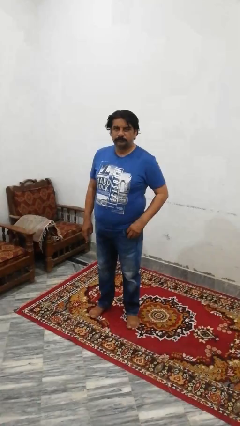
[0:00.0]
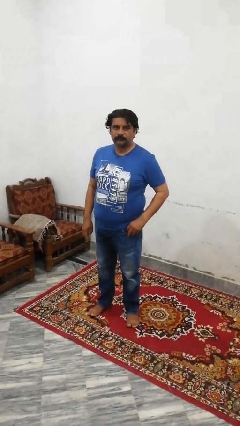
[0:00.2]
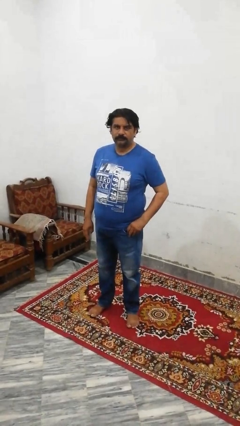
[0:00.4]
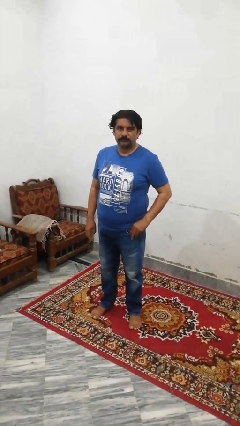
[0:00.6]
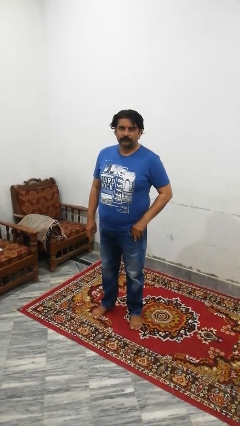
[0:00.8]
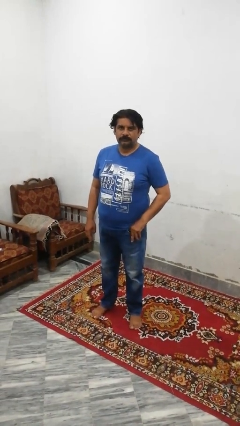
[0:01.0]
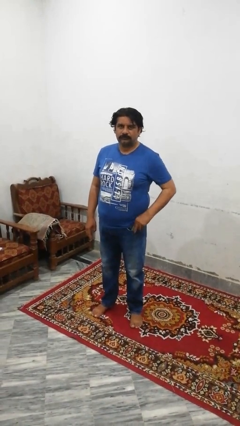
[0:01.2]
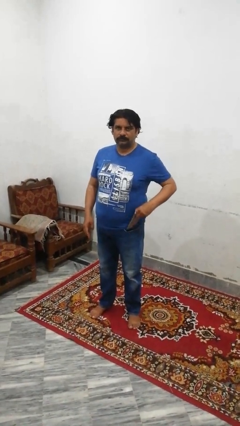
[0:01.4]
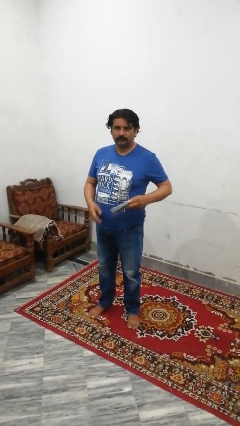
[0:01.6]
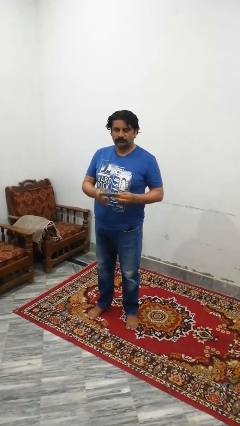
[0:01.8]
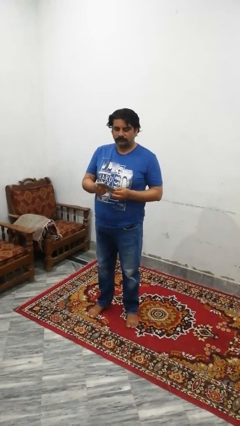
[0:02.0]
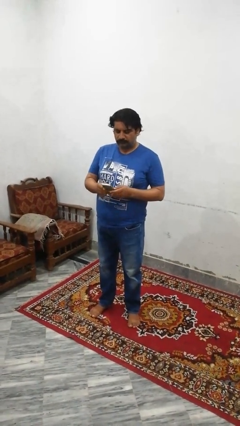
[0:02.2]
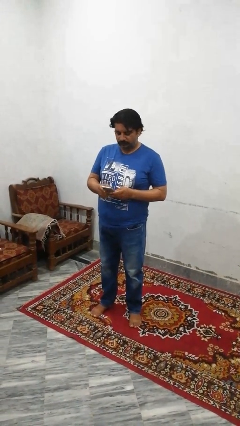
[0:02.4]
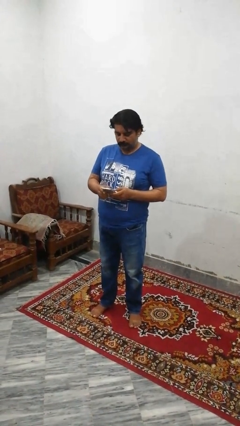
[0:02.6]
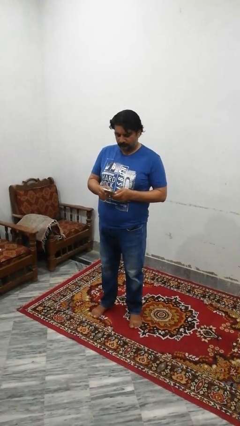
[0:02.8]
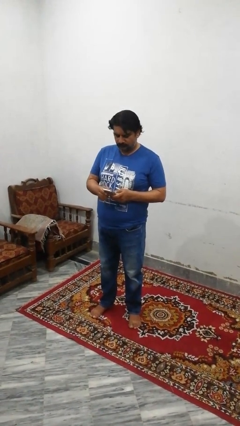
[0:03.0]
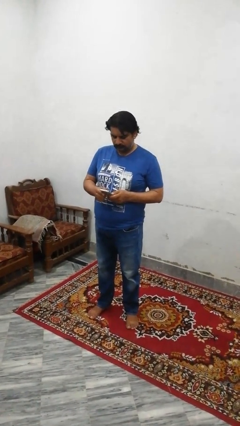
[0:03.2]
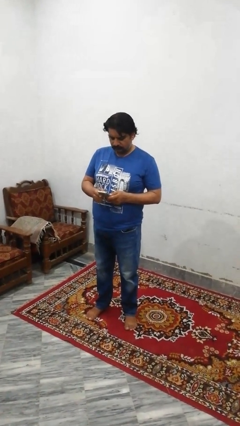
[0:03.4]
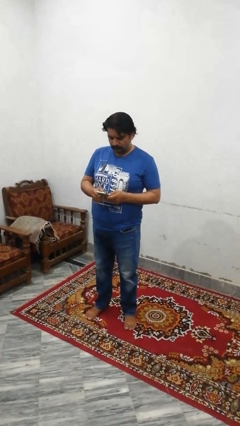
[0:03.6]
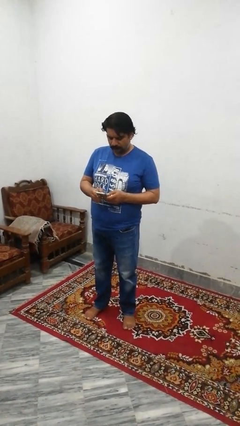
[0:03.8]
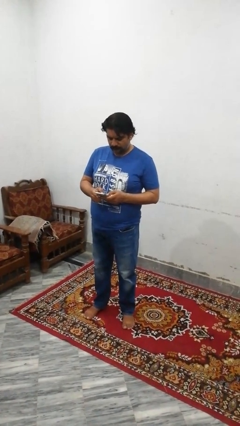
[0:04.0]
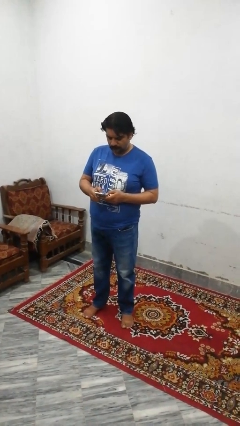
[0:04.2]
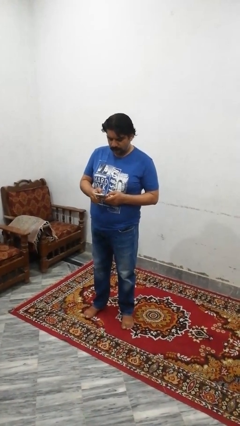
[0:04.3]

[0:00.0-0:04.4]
person takes phone from pocket

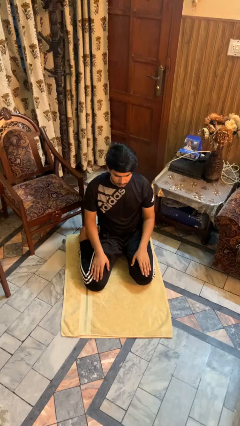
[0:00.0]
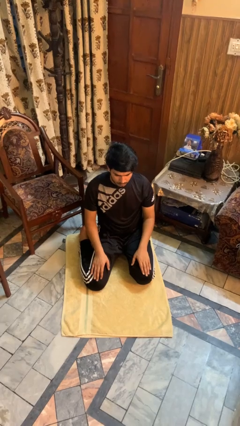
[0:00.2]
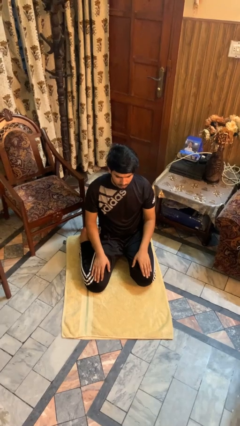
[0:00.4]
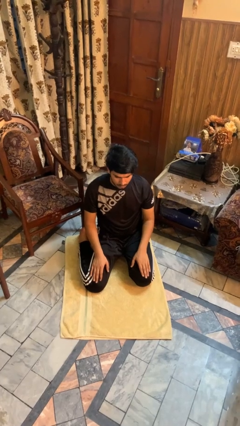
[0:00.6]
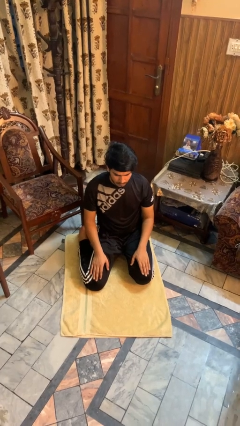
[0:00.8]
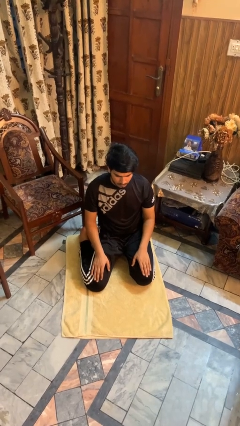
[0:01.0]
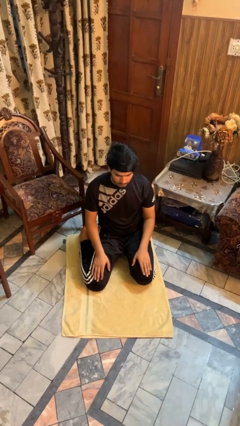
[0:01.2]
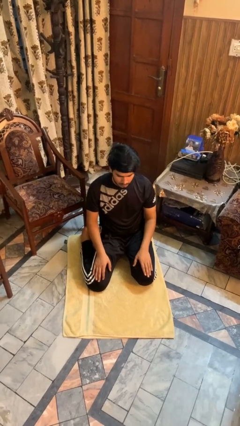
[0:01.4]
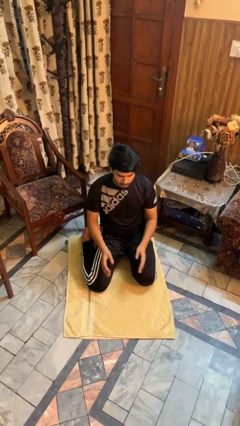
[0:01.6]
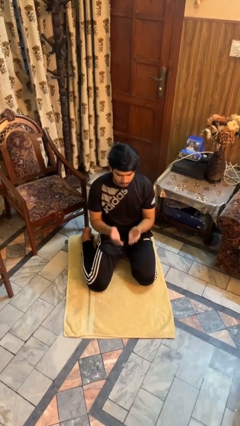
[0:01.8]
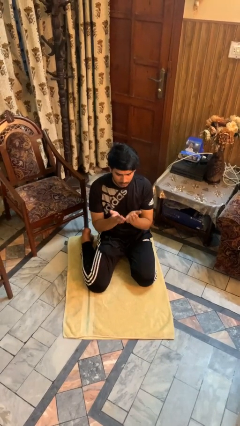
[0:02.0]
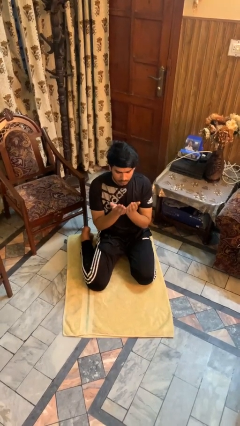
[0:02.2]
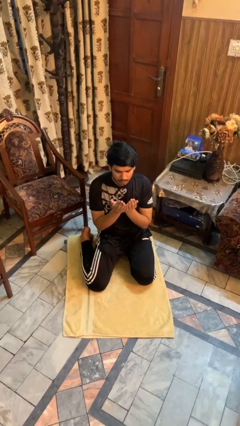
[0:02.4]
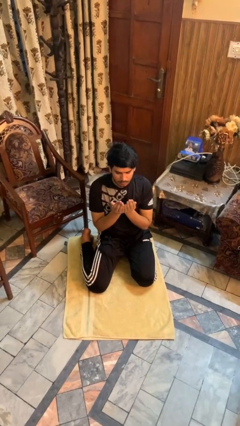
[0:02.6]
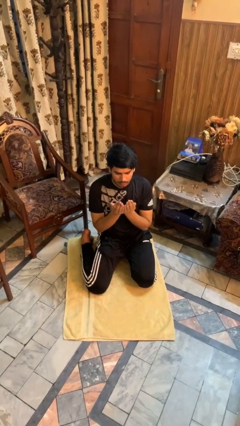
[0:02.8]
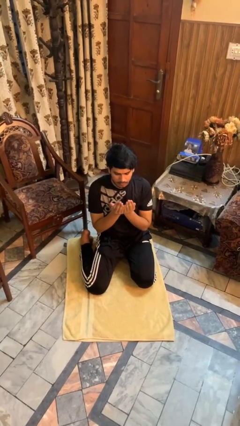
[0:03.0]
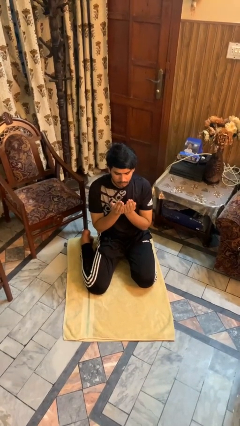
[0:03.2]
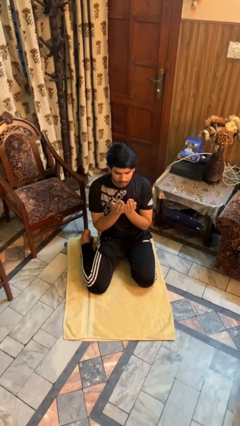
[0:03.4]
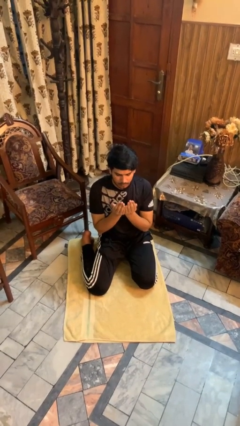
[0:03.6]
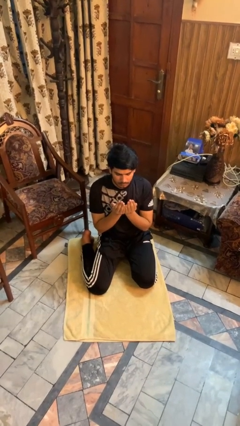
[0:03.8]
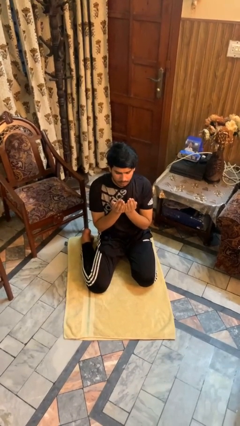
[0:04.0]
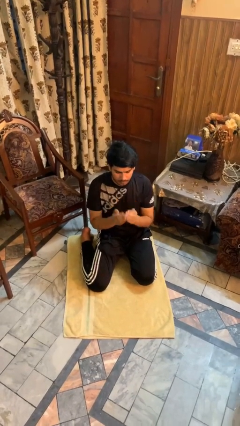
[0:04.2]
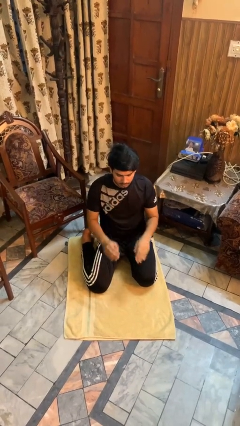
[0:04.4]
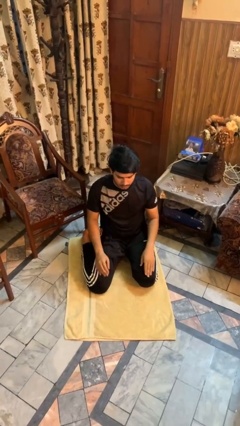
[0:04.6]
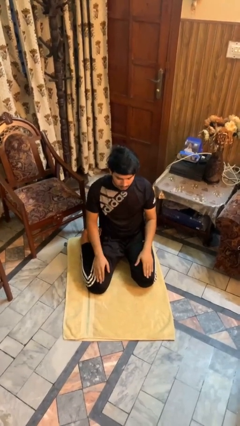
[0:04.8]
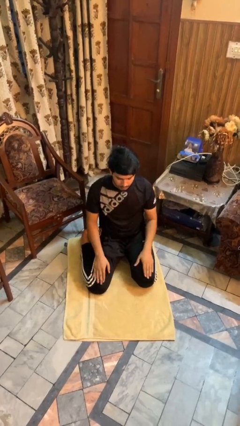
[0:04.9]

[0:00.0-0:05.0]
person prays

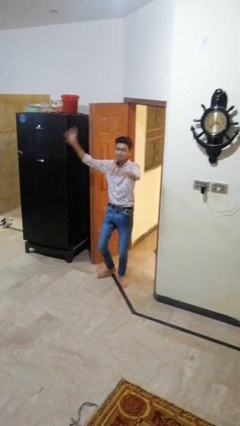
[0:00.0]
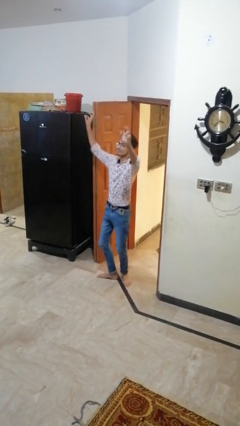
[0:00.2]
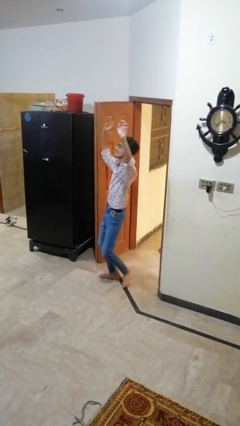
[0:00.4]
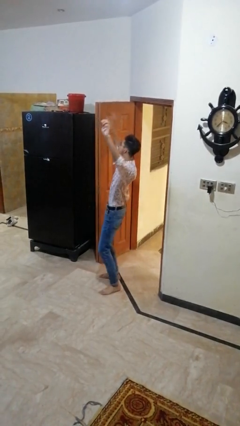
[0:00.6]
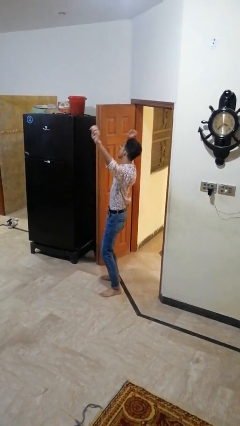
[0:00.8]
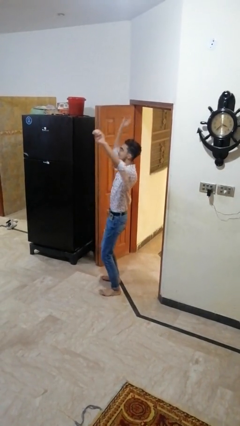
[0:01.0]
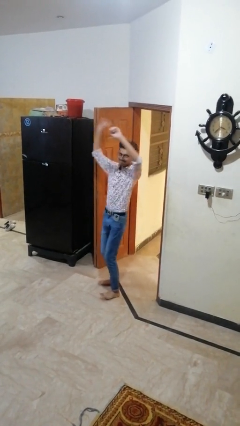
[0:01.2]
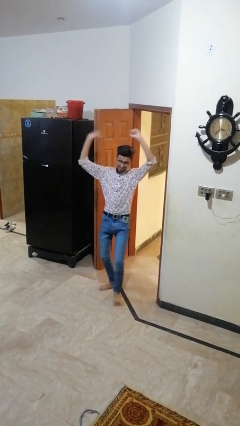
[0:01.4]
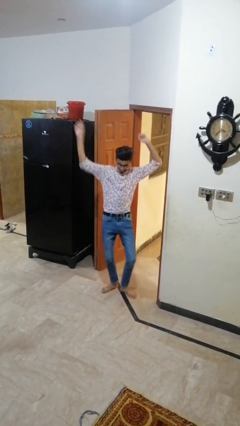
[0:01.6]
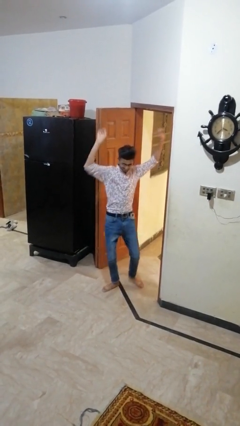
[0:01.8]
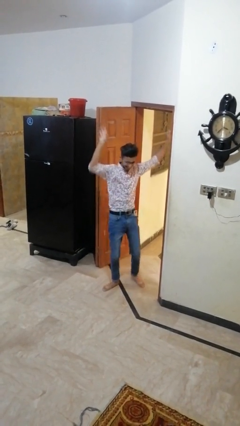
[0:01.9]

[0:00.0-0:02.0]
person dances in place

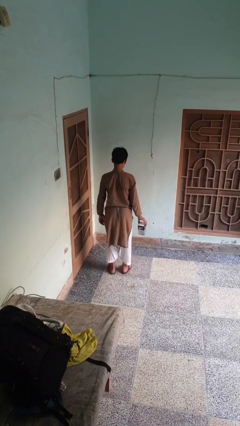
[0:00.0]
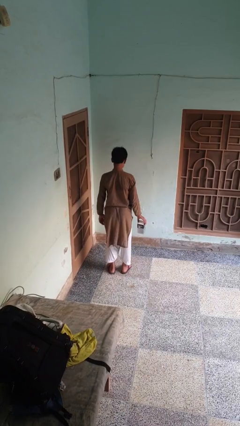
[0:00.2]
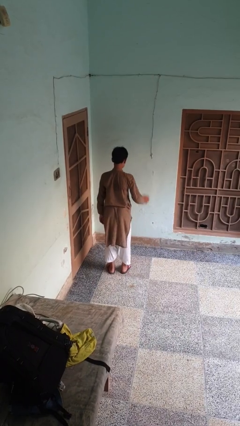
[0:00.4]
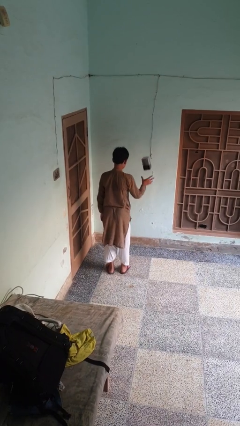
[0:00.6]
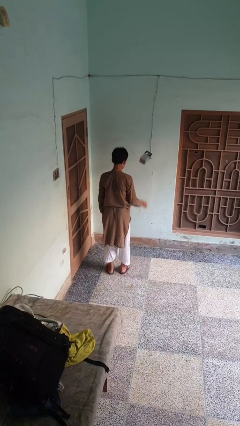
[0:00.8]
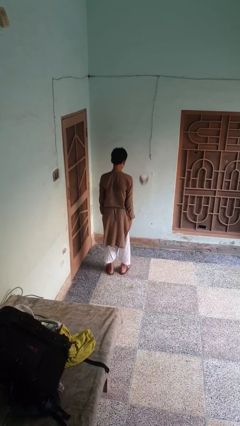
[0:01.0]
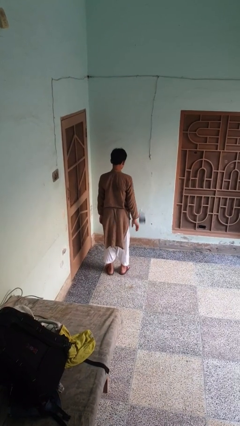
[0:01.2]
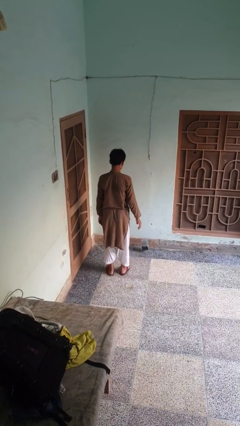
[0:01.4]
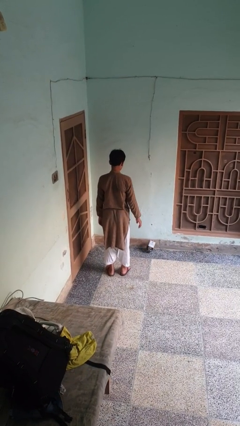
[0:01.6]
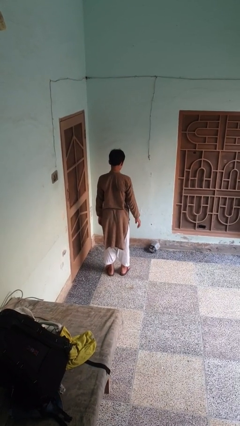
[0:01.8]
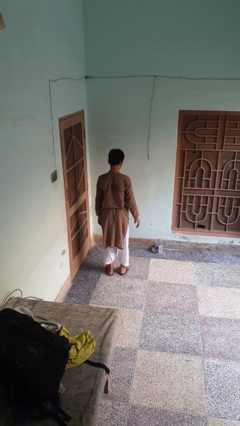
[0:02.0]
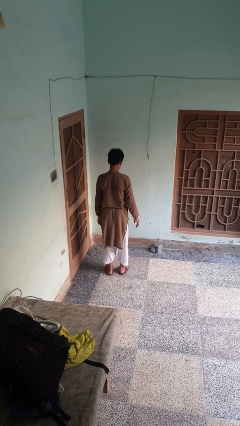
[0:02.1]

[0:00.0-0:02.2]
person throws object into air

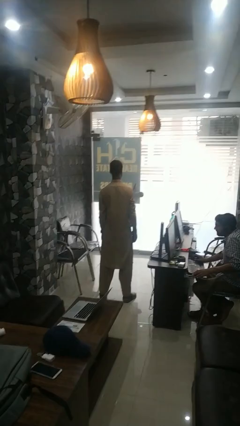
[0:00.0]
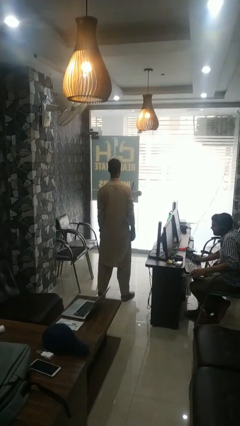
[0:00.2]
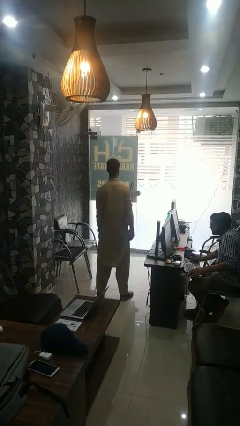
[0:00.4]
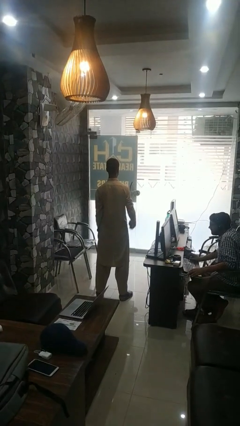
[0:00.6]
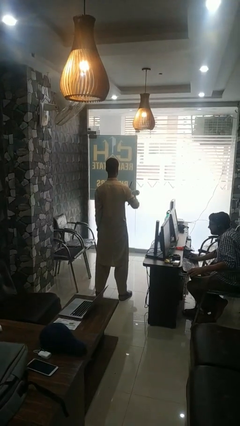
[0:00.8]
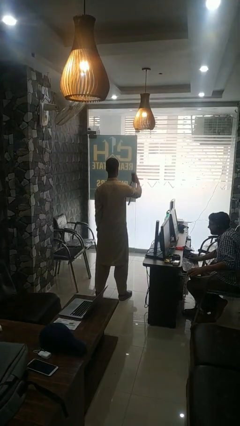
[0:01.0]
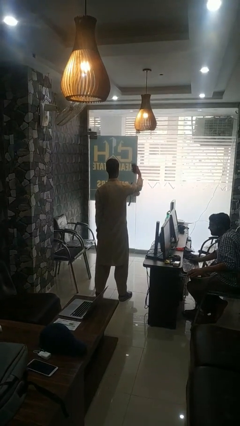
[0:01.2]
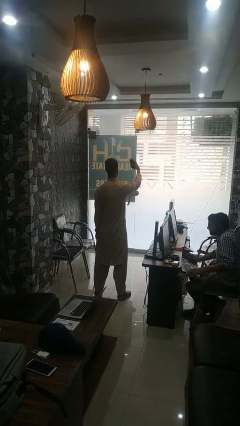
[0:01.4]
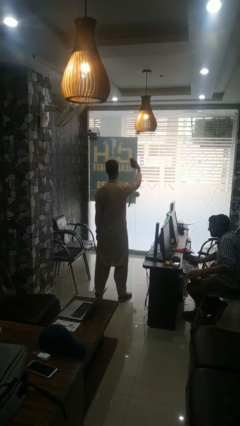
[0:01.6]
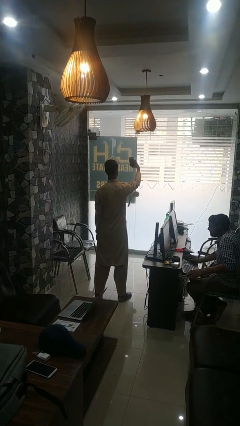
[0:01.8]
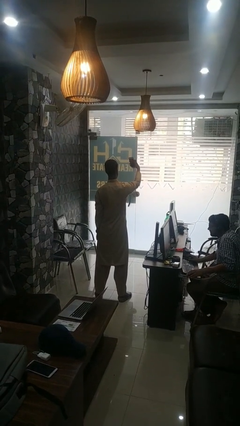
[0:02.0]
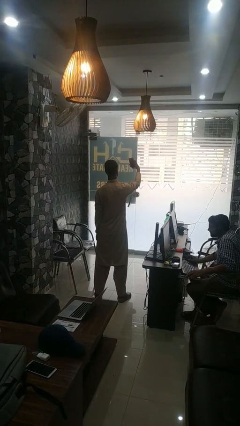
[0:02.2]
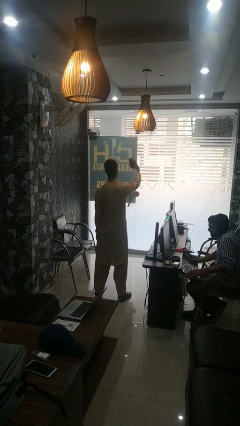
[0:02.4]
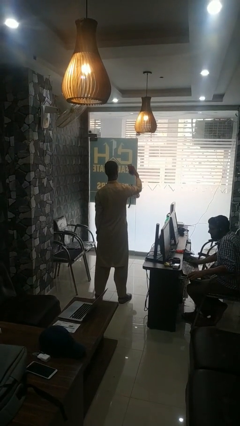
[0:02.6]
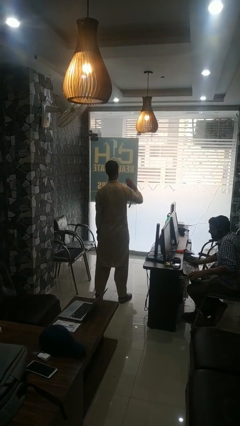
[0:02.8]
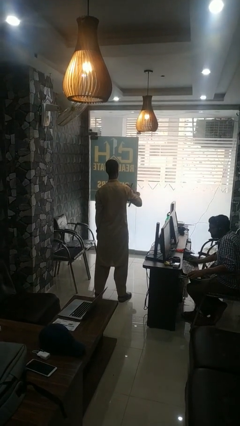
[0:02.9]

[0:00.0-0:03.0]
person takes selfie

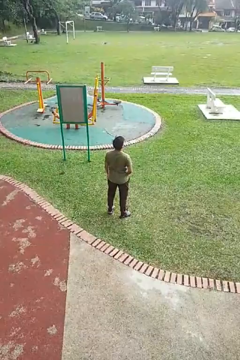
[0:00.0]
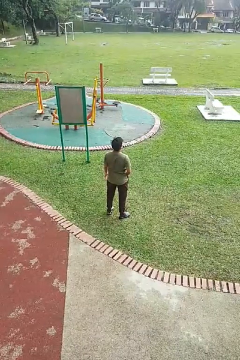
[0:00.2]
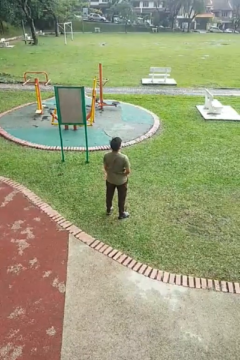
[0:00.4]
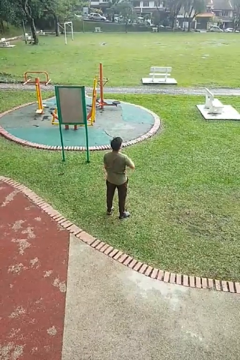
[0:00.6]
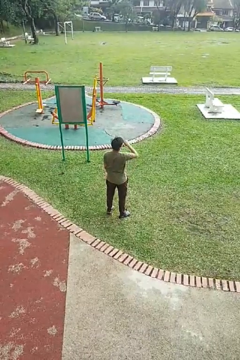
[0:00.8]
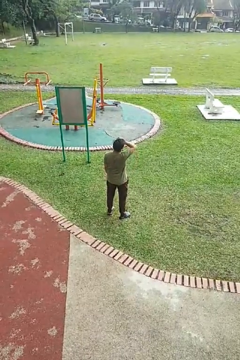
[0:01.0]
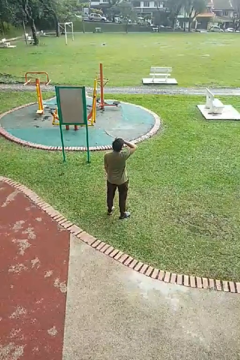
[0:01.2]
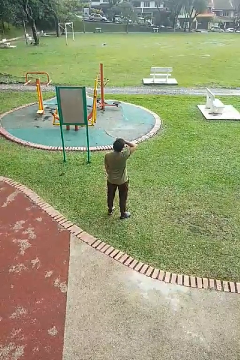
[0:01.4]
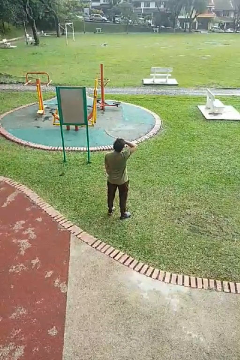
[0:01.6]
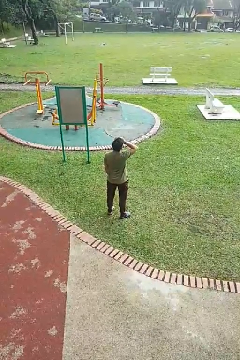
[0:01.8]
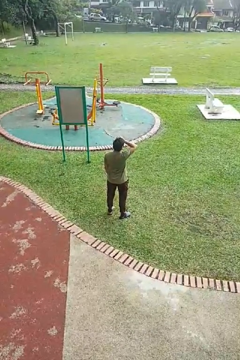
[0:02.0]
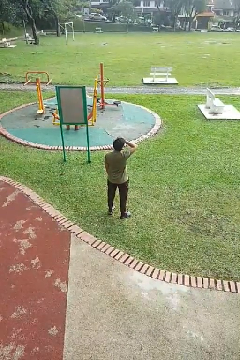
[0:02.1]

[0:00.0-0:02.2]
person rubs eyes
